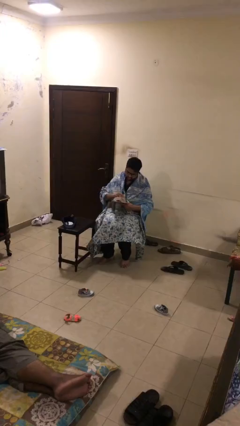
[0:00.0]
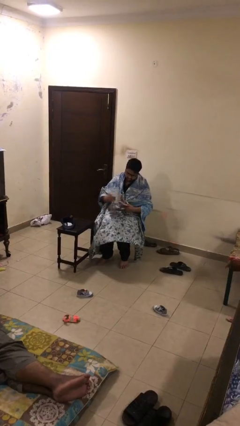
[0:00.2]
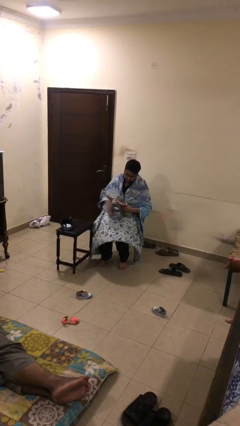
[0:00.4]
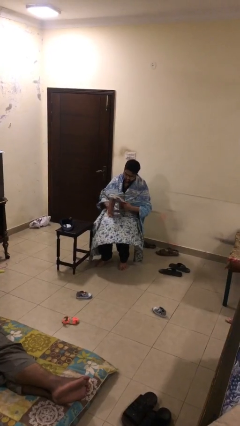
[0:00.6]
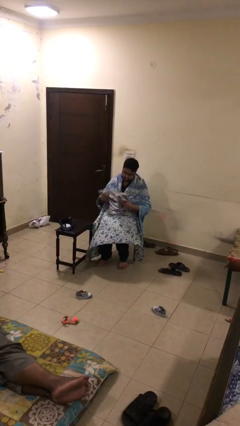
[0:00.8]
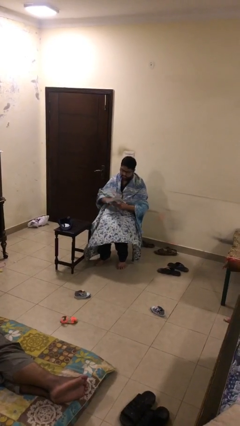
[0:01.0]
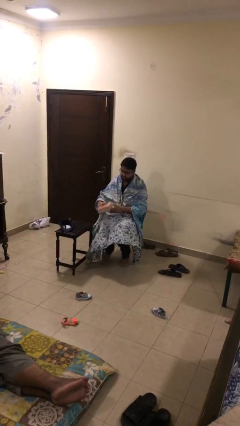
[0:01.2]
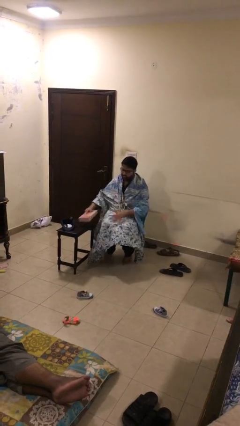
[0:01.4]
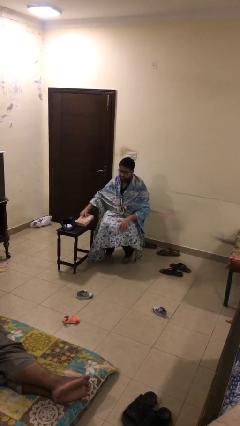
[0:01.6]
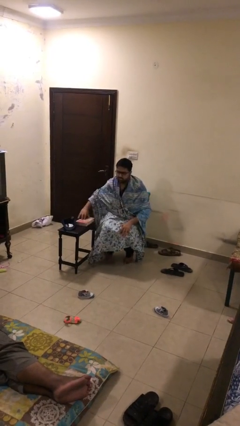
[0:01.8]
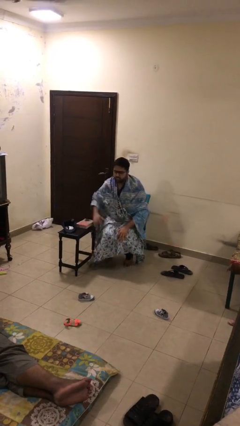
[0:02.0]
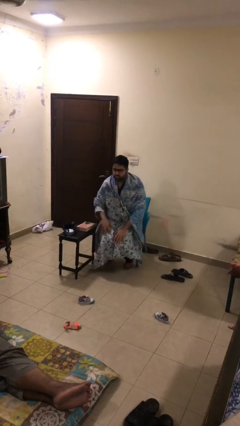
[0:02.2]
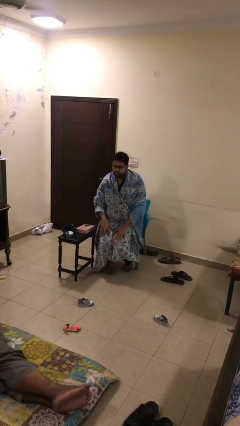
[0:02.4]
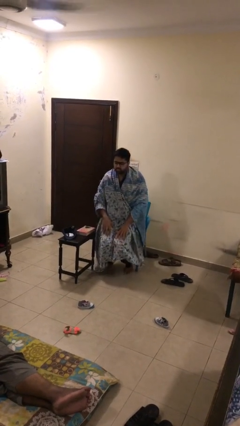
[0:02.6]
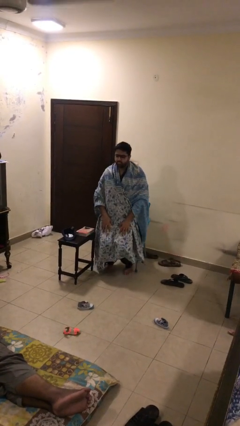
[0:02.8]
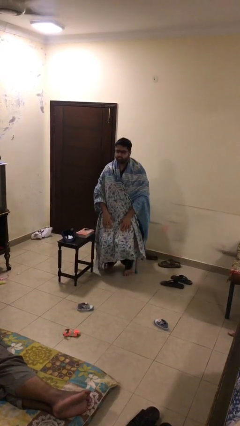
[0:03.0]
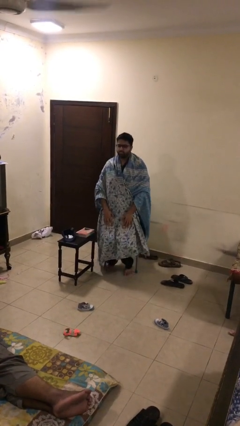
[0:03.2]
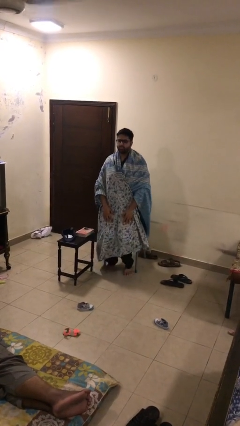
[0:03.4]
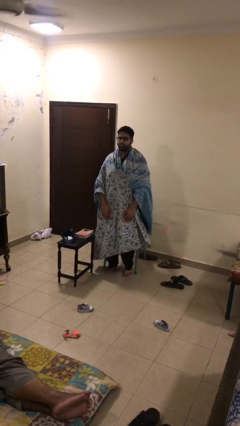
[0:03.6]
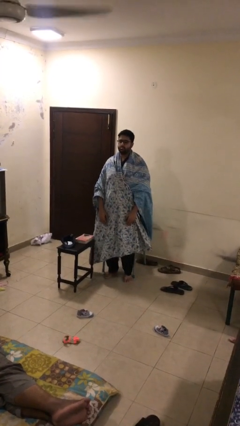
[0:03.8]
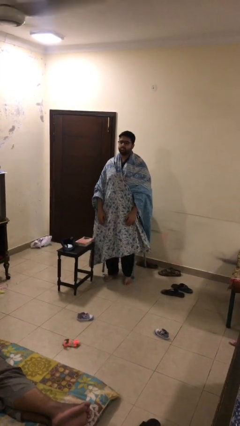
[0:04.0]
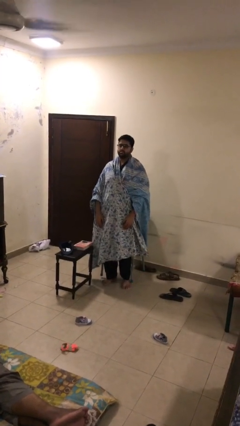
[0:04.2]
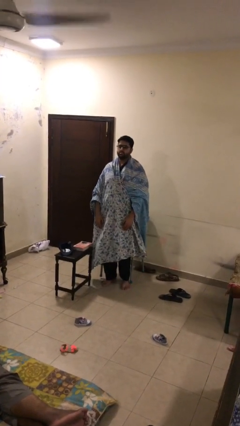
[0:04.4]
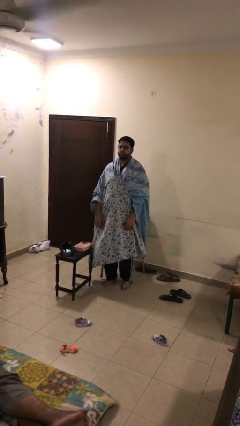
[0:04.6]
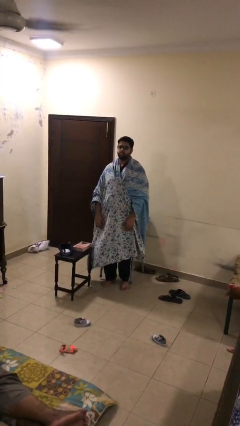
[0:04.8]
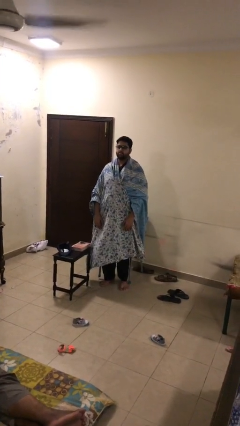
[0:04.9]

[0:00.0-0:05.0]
person stands up

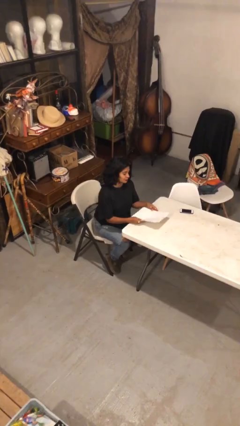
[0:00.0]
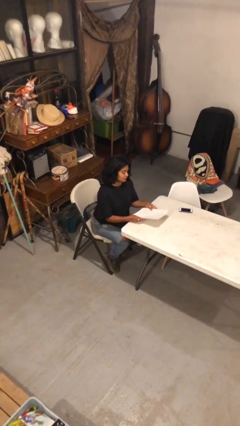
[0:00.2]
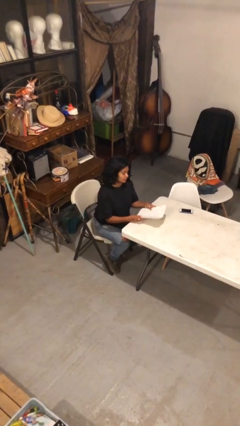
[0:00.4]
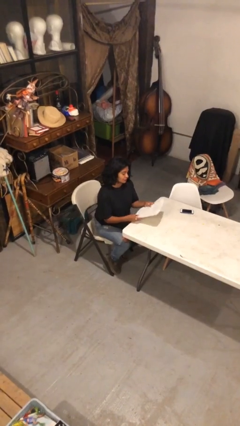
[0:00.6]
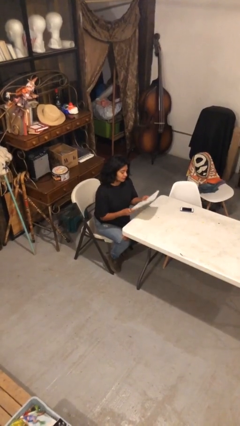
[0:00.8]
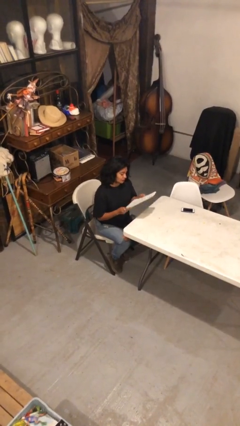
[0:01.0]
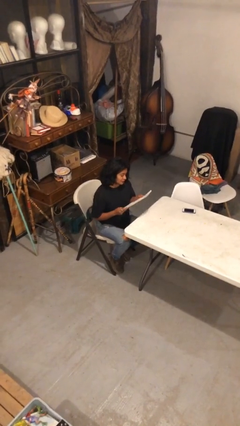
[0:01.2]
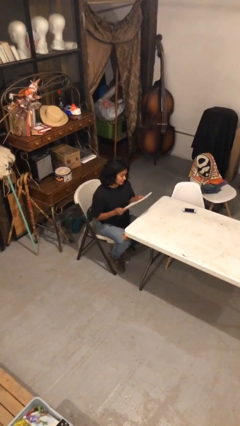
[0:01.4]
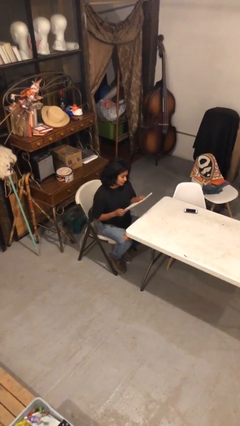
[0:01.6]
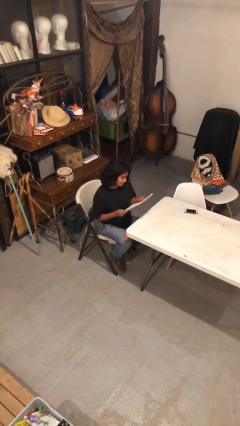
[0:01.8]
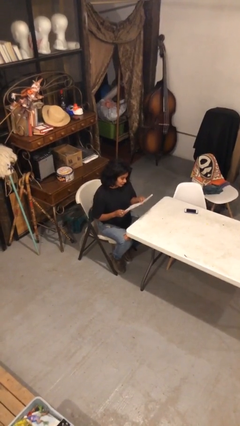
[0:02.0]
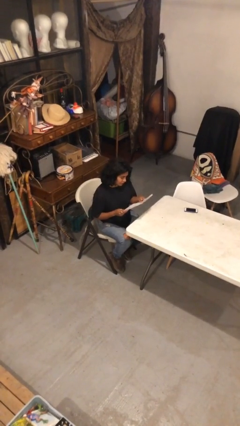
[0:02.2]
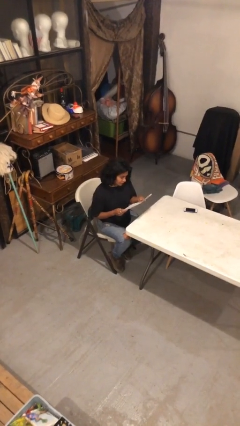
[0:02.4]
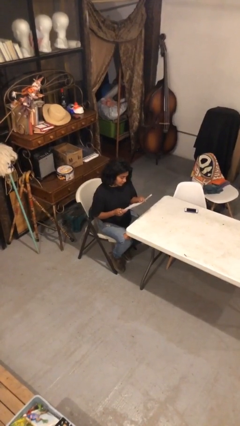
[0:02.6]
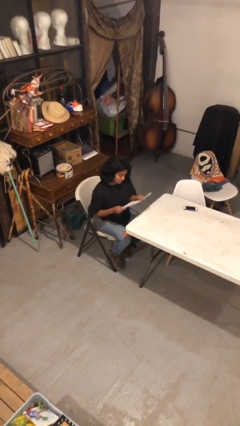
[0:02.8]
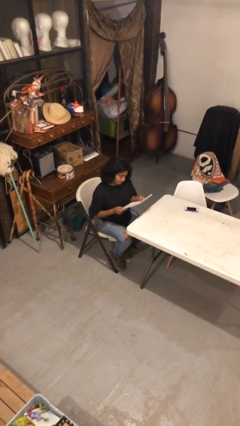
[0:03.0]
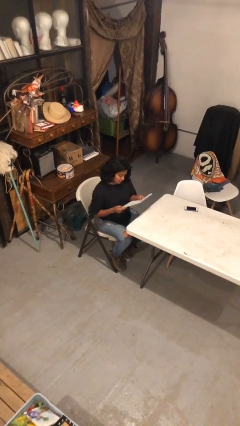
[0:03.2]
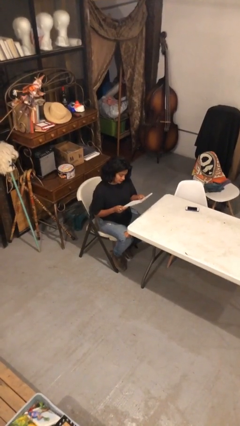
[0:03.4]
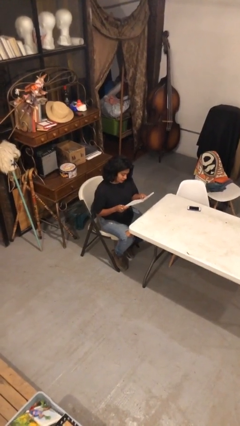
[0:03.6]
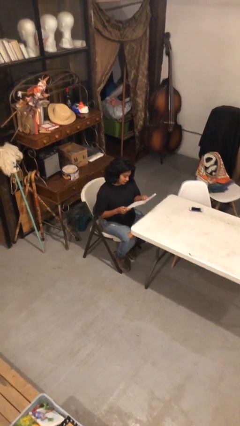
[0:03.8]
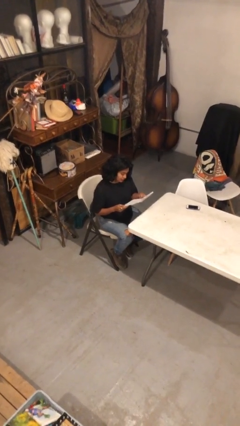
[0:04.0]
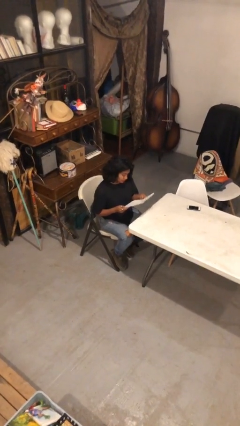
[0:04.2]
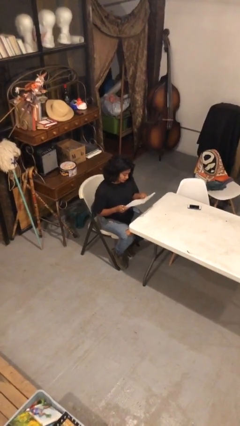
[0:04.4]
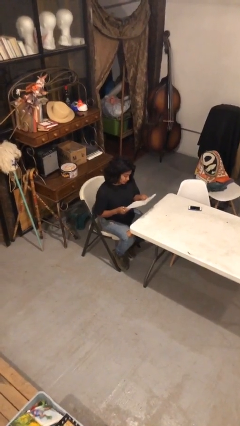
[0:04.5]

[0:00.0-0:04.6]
person reads document

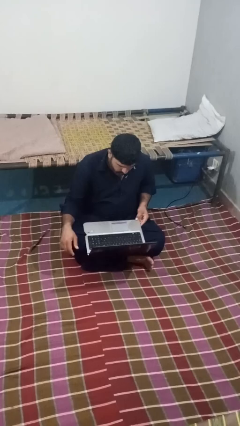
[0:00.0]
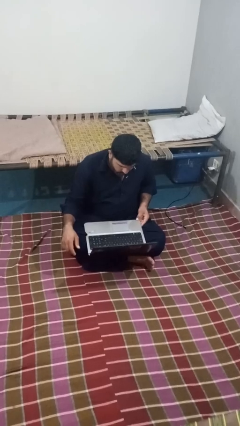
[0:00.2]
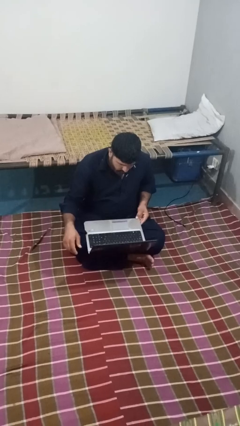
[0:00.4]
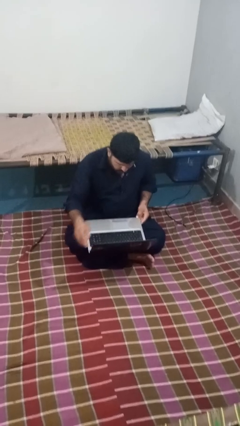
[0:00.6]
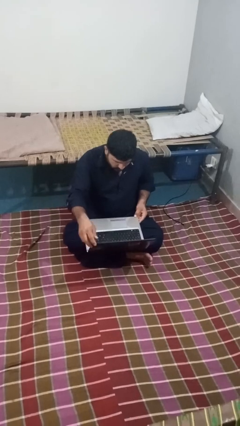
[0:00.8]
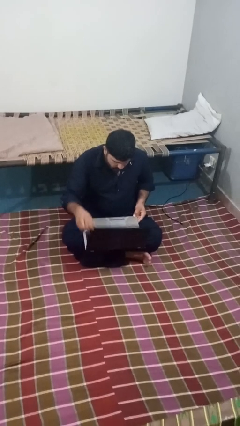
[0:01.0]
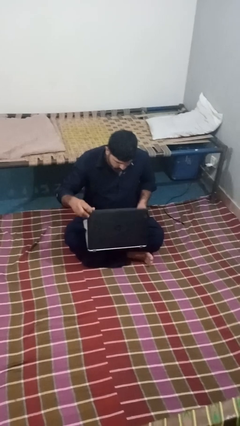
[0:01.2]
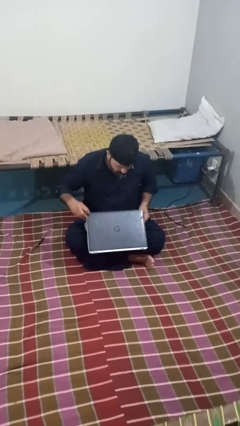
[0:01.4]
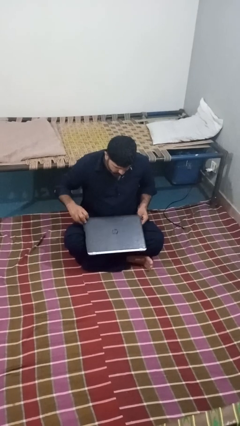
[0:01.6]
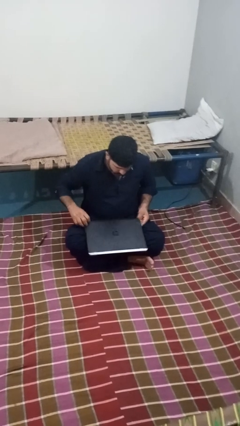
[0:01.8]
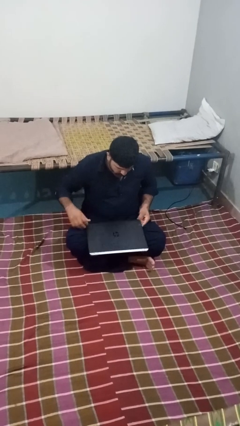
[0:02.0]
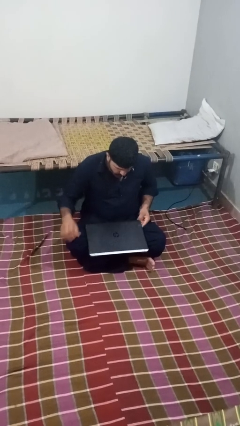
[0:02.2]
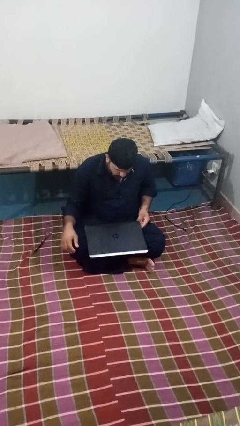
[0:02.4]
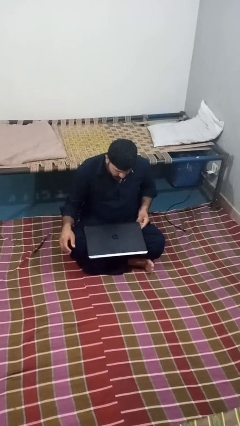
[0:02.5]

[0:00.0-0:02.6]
person closes laptop

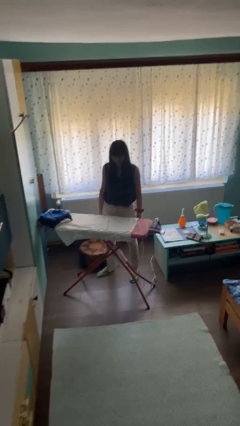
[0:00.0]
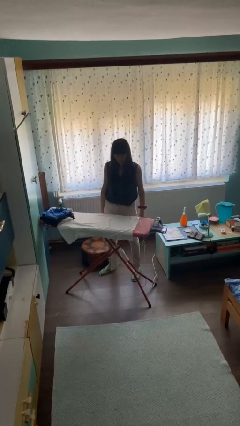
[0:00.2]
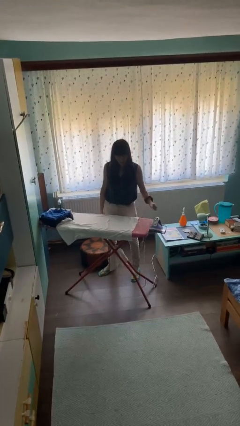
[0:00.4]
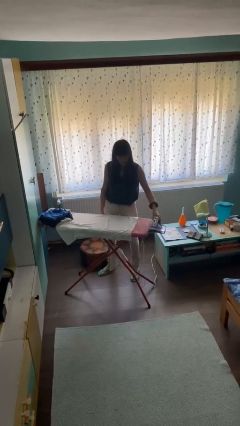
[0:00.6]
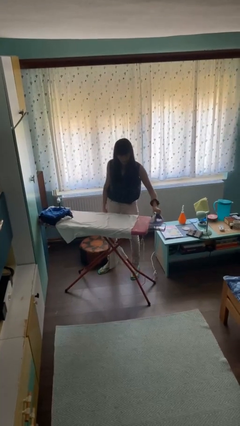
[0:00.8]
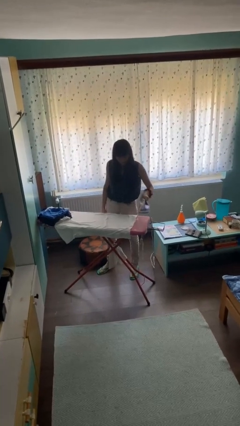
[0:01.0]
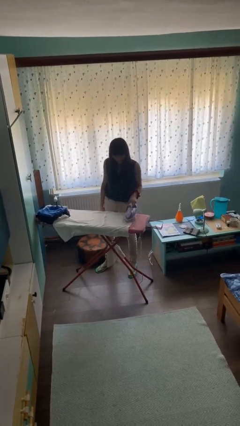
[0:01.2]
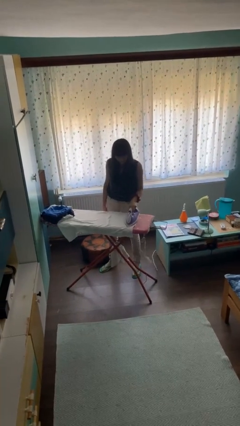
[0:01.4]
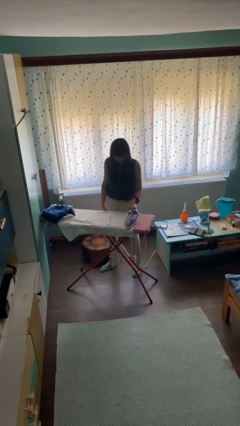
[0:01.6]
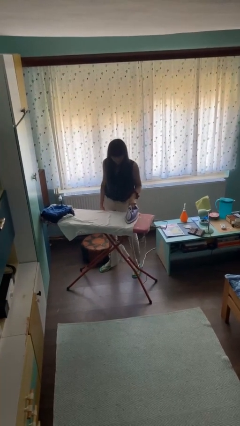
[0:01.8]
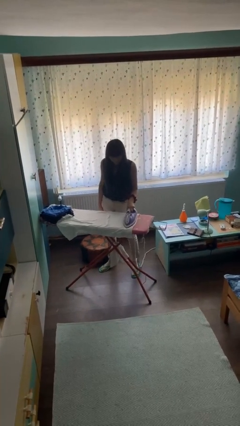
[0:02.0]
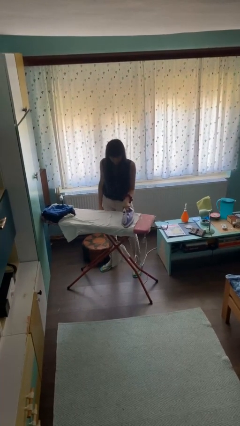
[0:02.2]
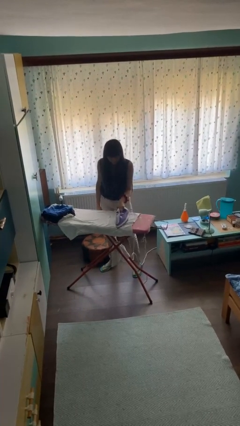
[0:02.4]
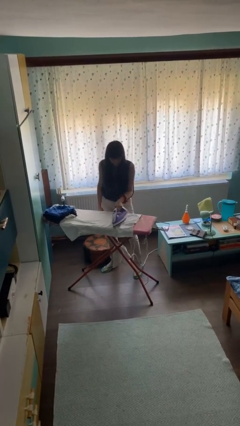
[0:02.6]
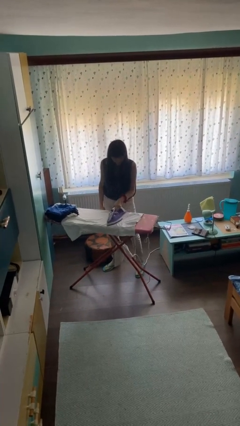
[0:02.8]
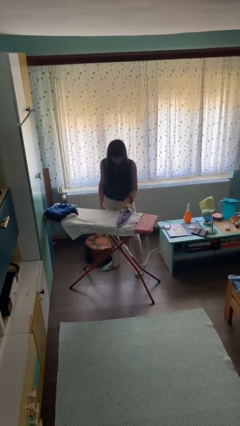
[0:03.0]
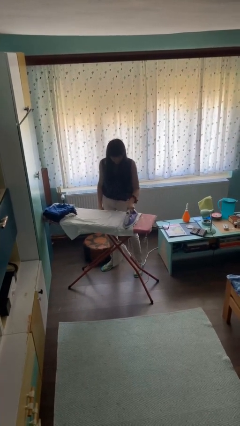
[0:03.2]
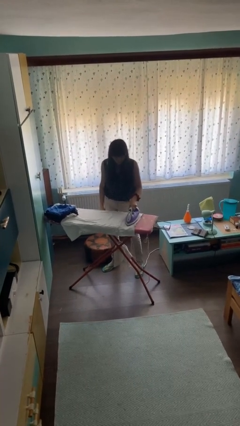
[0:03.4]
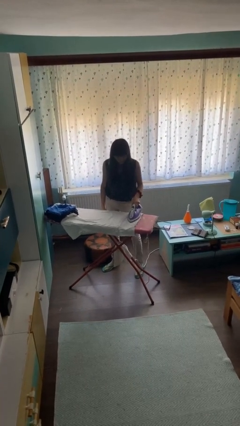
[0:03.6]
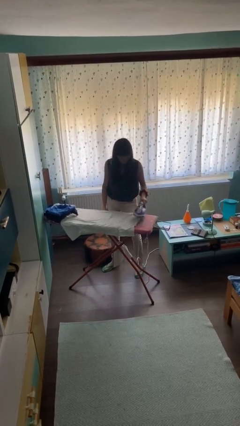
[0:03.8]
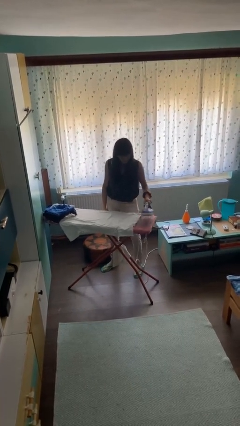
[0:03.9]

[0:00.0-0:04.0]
person irons clothes

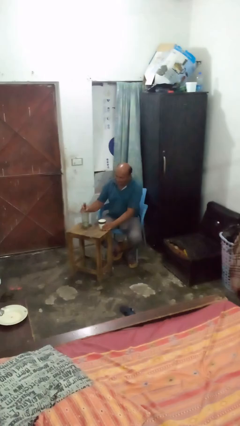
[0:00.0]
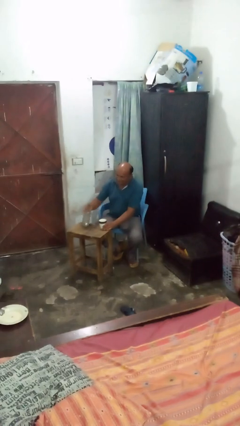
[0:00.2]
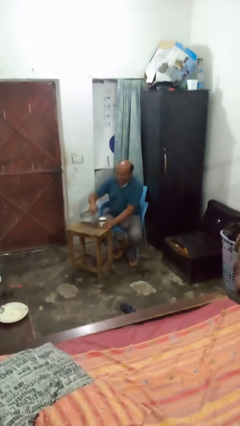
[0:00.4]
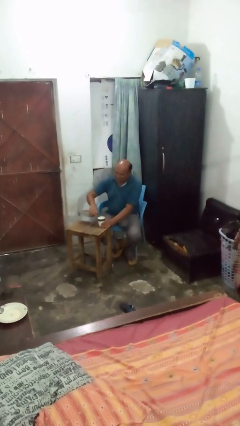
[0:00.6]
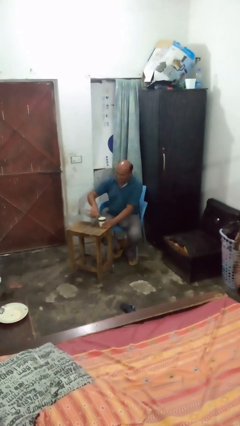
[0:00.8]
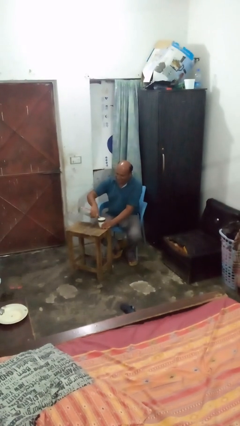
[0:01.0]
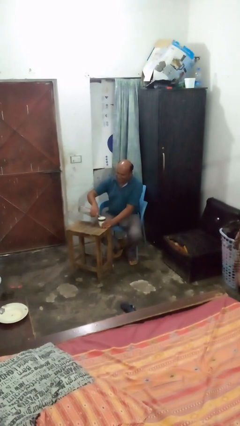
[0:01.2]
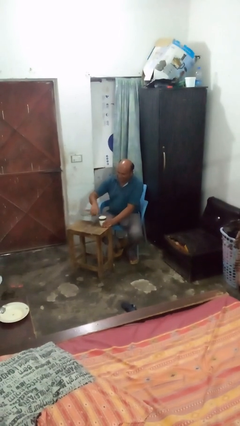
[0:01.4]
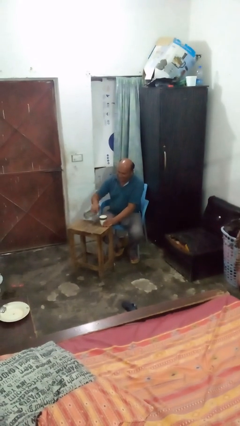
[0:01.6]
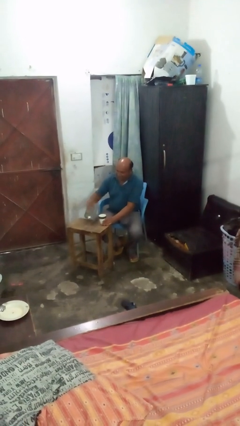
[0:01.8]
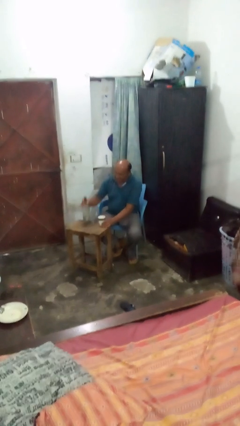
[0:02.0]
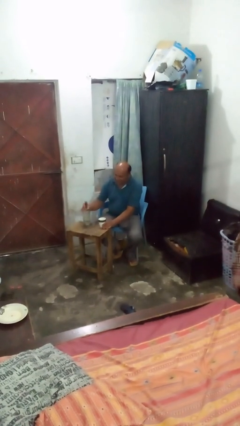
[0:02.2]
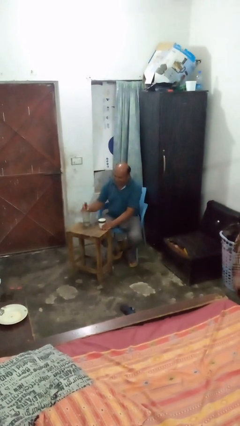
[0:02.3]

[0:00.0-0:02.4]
person pours liquid into cup
